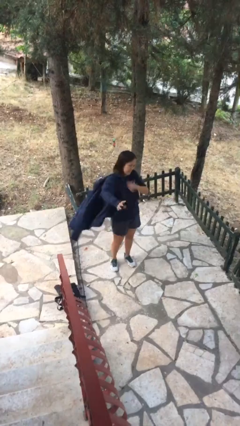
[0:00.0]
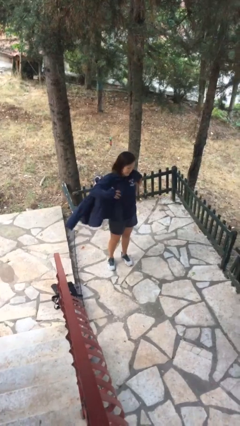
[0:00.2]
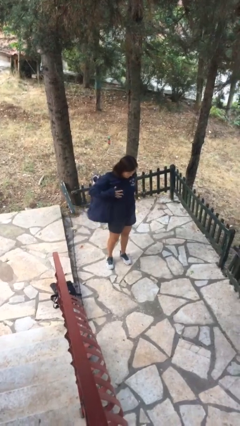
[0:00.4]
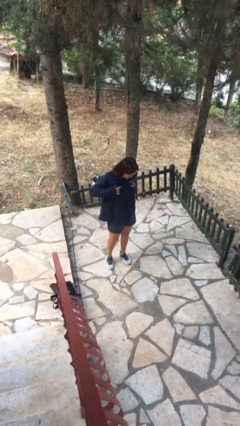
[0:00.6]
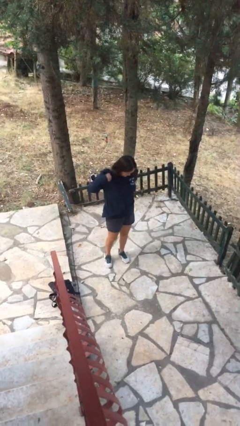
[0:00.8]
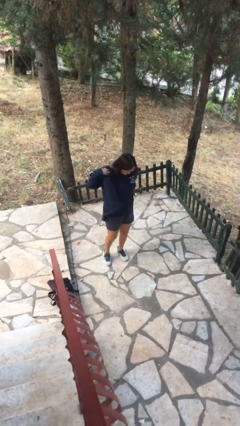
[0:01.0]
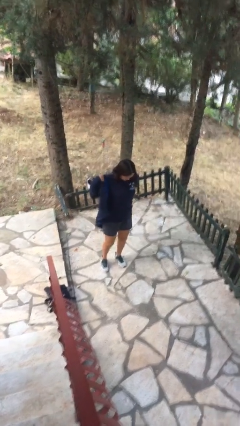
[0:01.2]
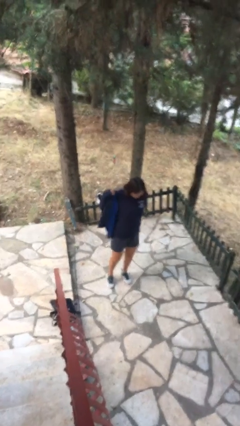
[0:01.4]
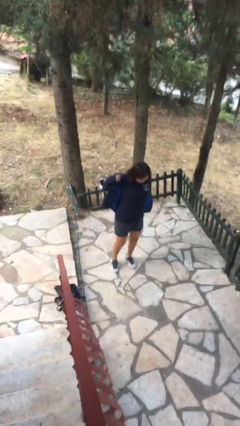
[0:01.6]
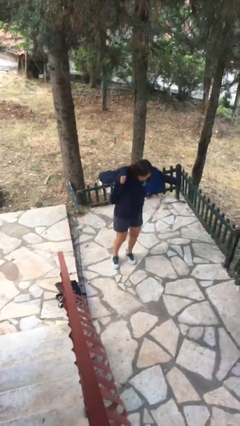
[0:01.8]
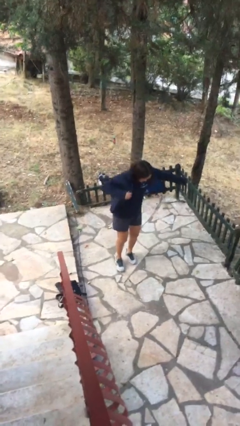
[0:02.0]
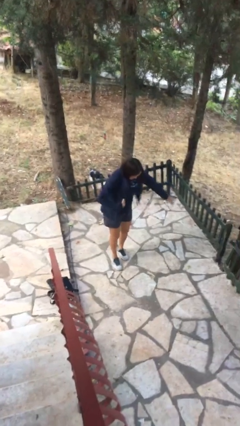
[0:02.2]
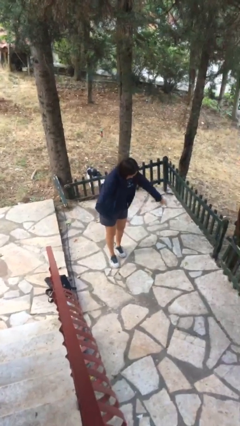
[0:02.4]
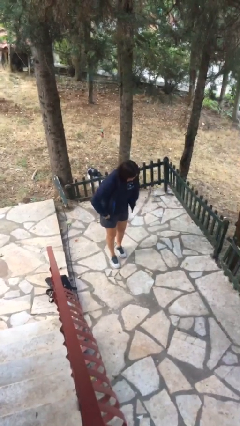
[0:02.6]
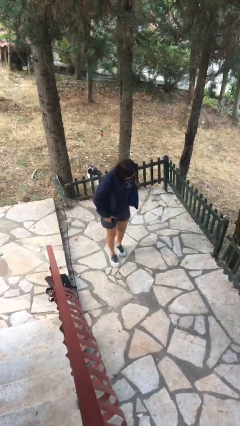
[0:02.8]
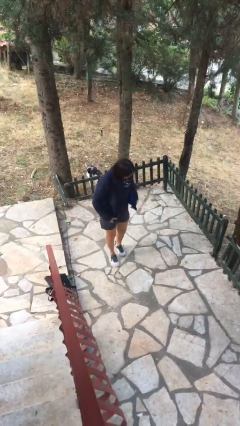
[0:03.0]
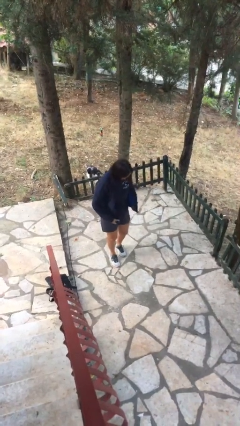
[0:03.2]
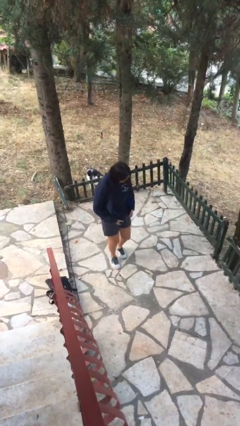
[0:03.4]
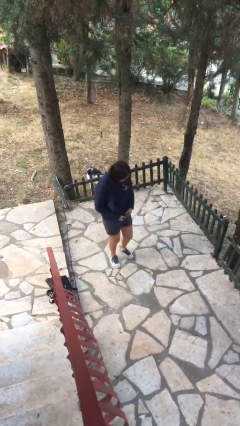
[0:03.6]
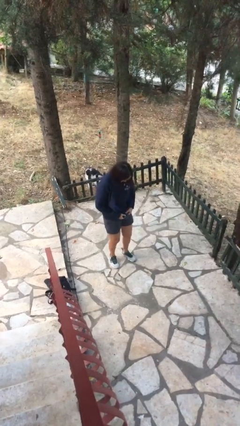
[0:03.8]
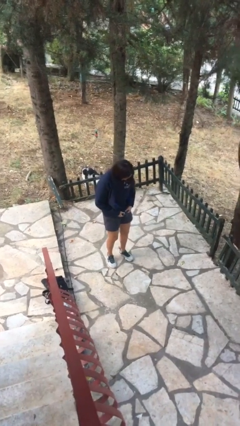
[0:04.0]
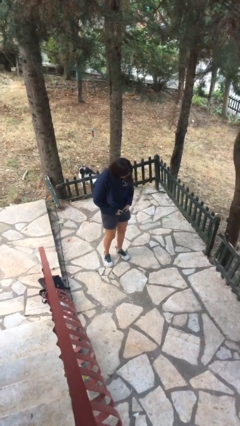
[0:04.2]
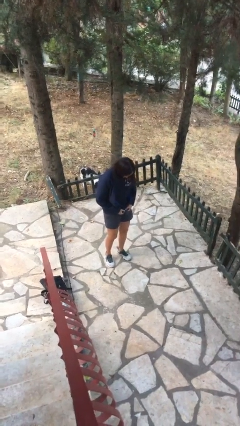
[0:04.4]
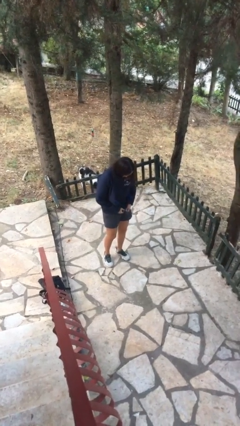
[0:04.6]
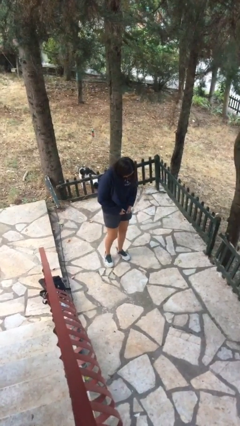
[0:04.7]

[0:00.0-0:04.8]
person puts on jacket

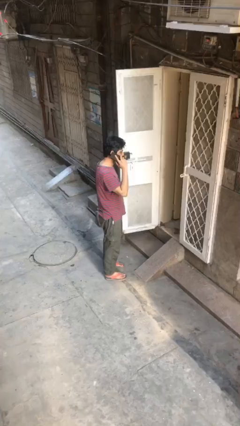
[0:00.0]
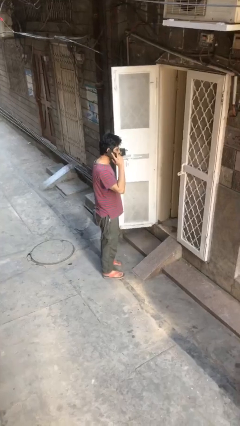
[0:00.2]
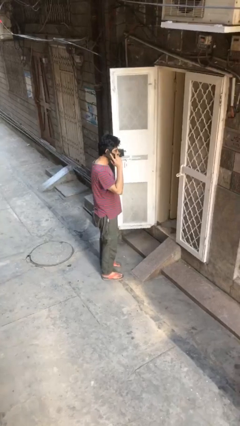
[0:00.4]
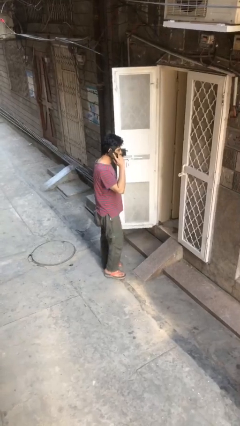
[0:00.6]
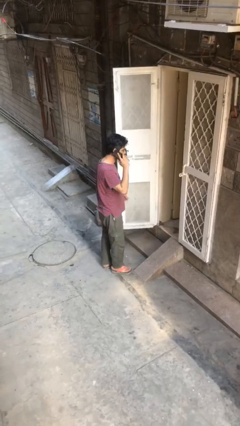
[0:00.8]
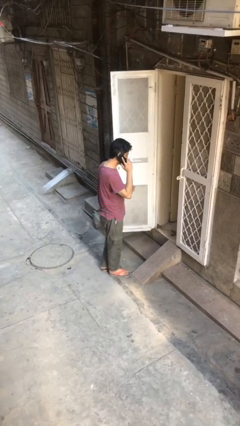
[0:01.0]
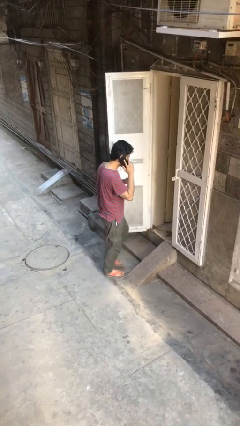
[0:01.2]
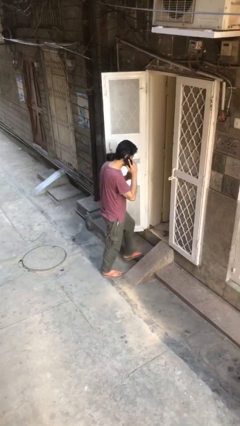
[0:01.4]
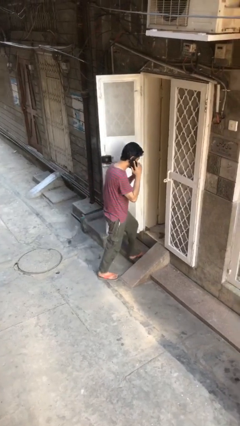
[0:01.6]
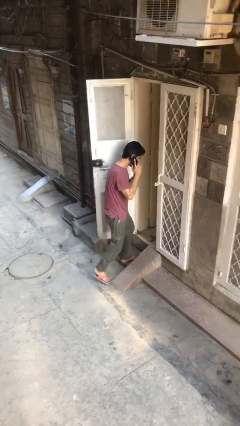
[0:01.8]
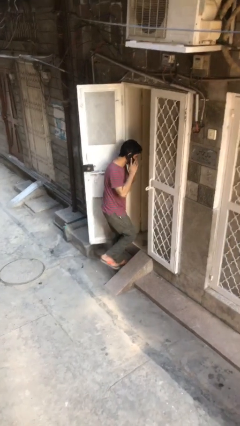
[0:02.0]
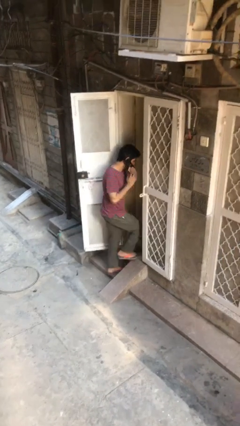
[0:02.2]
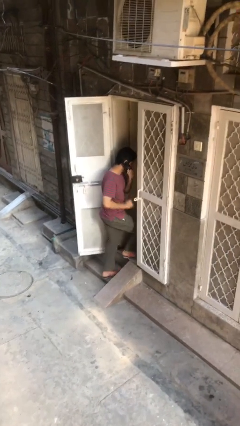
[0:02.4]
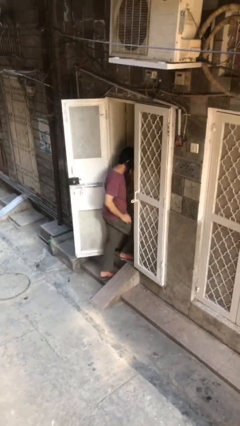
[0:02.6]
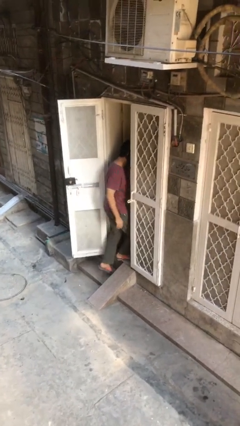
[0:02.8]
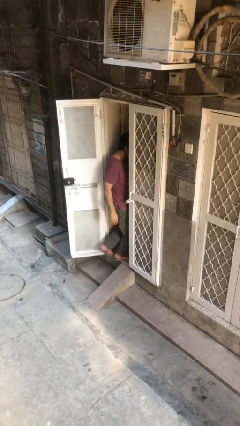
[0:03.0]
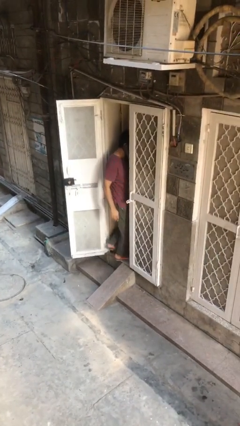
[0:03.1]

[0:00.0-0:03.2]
person exits scene through structure

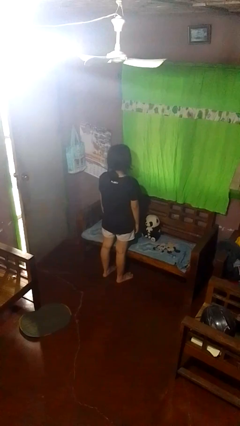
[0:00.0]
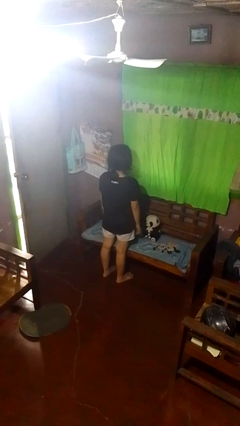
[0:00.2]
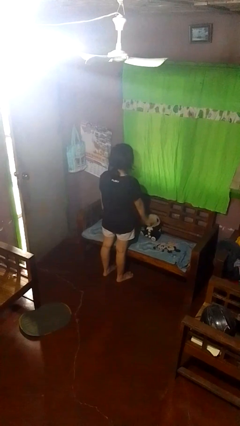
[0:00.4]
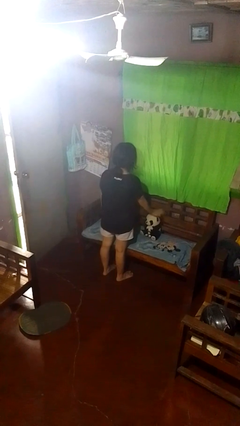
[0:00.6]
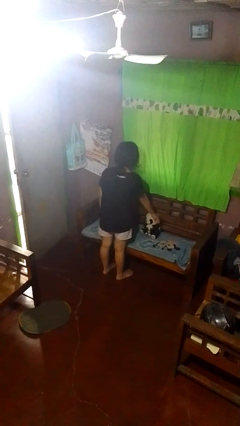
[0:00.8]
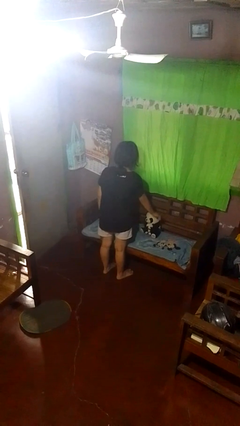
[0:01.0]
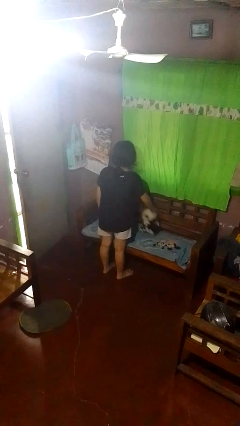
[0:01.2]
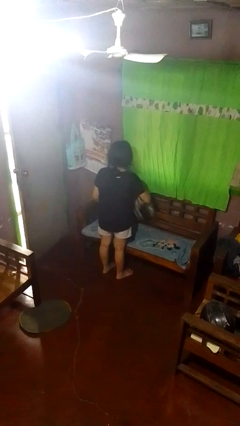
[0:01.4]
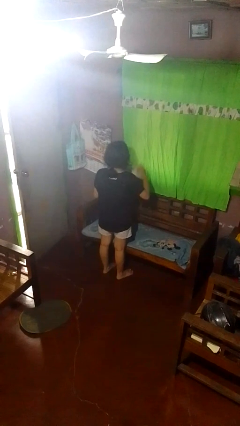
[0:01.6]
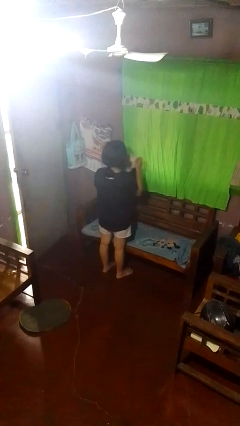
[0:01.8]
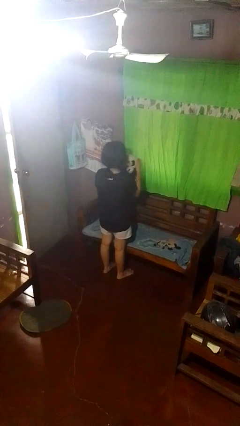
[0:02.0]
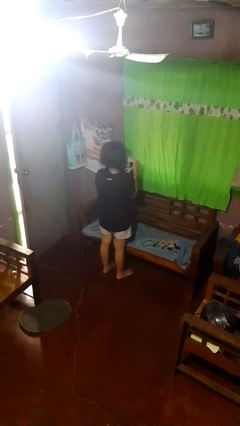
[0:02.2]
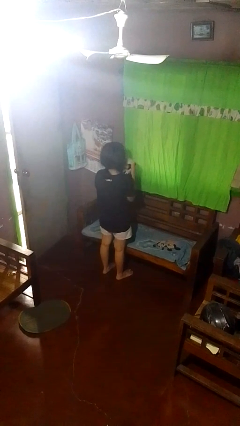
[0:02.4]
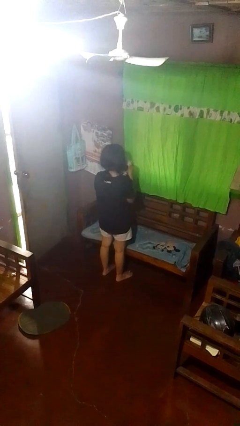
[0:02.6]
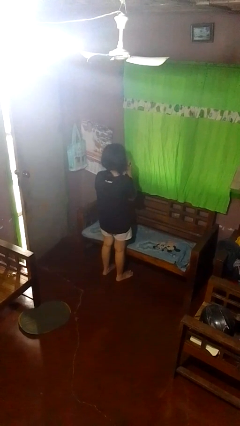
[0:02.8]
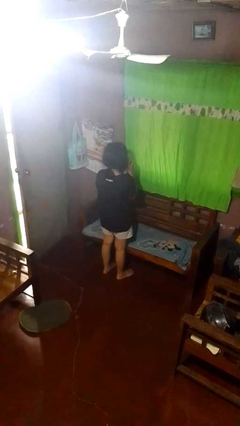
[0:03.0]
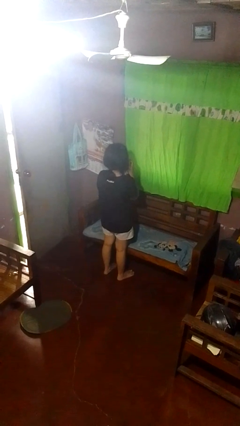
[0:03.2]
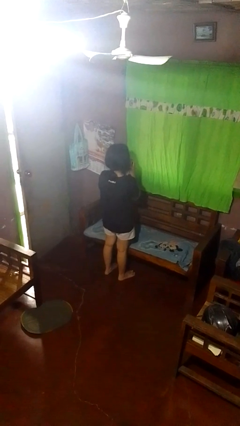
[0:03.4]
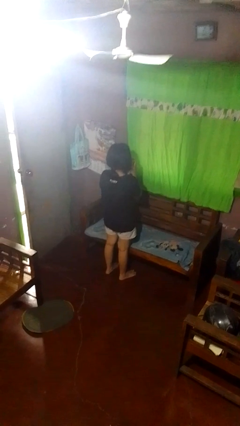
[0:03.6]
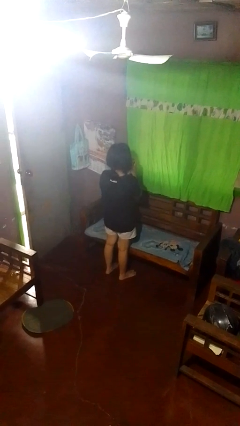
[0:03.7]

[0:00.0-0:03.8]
person picks up object from couch

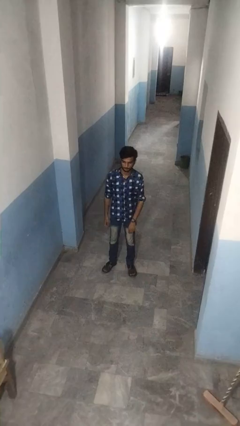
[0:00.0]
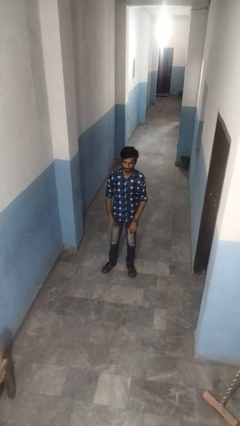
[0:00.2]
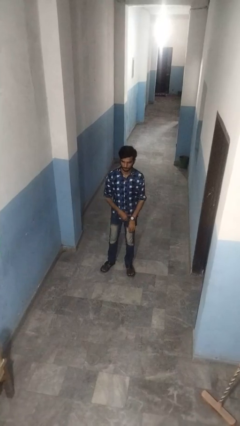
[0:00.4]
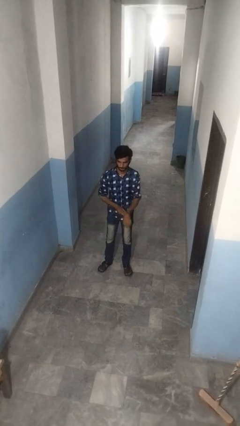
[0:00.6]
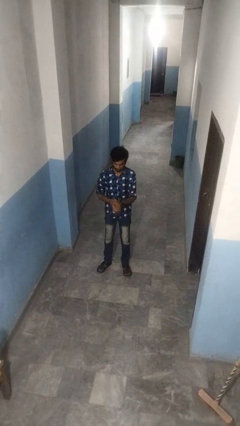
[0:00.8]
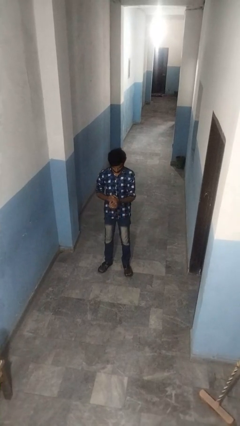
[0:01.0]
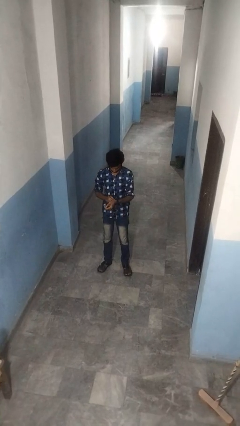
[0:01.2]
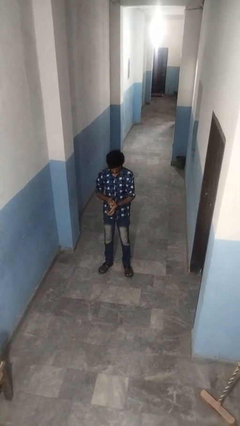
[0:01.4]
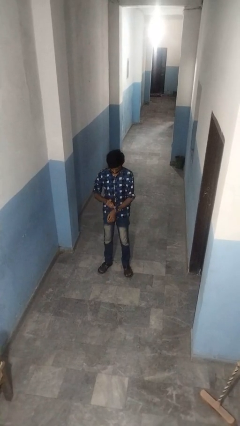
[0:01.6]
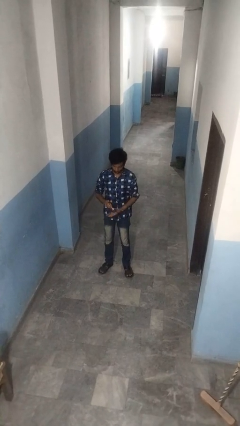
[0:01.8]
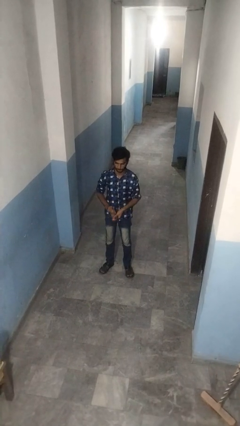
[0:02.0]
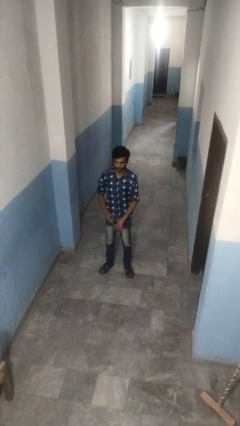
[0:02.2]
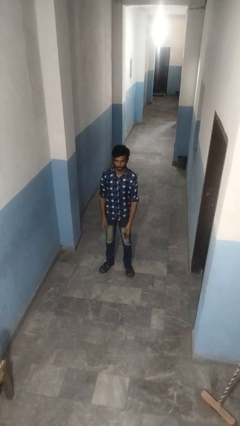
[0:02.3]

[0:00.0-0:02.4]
person takes off wristwatch

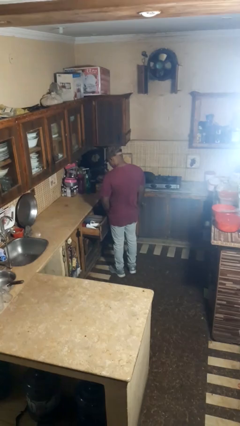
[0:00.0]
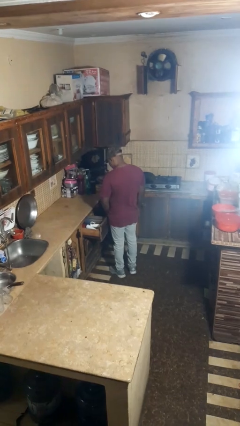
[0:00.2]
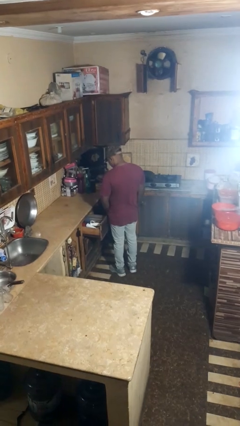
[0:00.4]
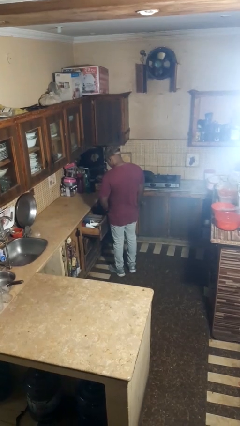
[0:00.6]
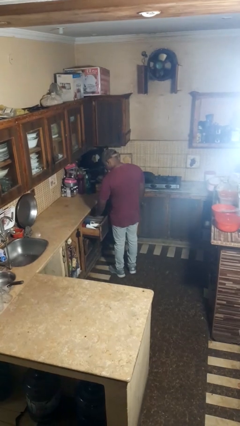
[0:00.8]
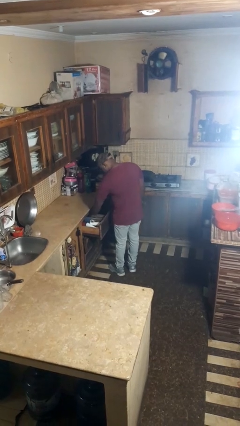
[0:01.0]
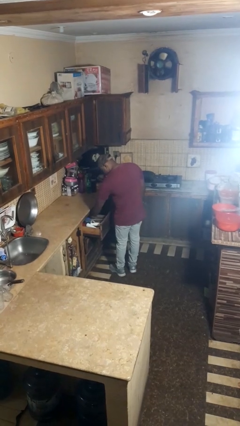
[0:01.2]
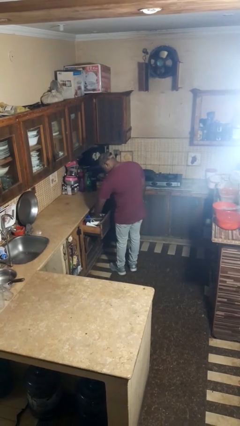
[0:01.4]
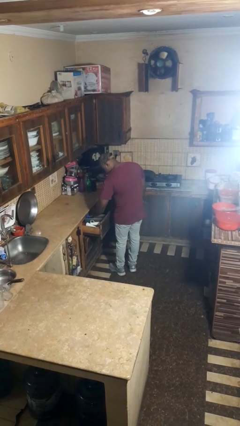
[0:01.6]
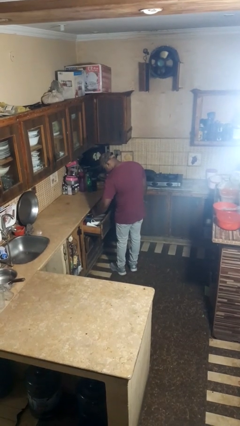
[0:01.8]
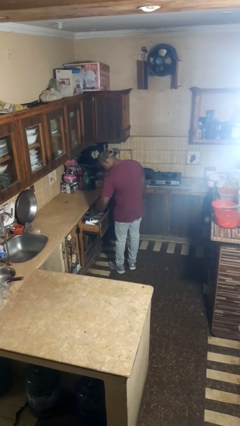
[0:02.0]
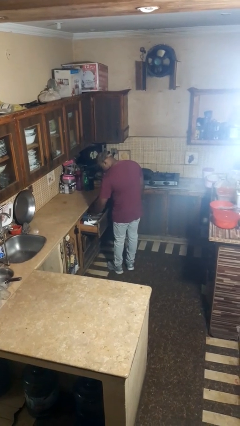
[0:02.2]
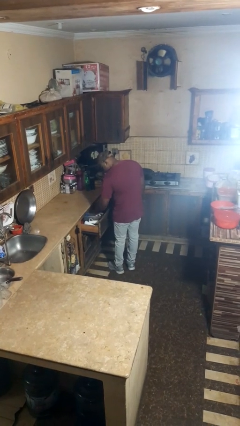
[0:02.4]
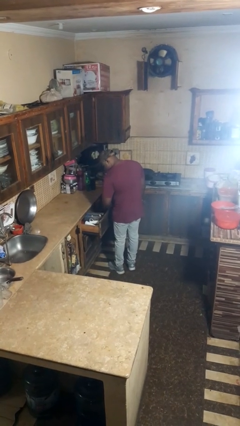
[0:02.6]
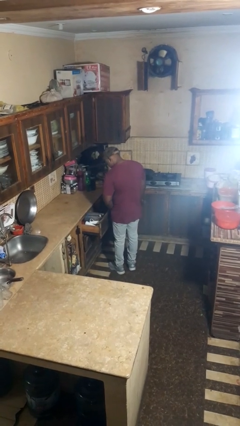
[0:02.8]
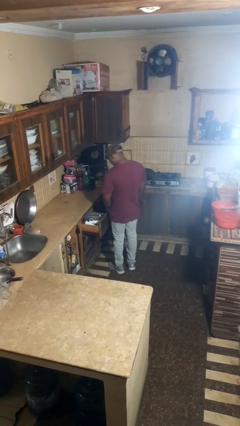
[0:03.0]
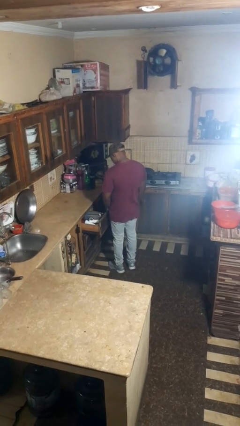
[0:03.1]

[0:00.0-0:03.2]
person searches in kitchen drawer

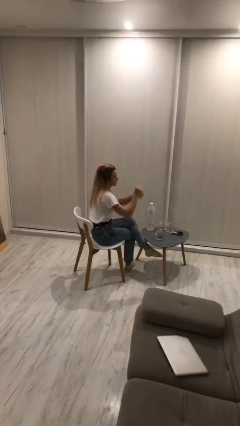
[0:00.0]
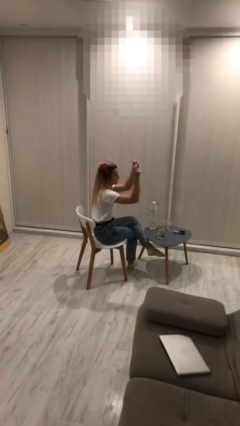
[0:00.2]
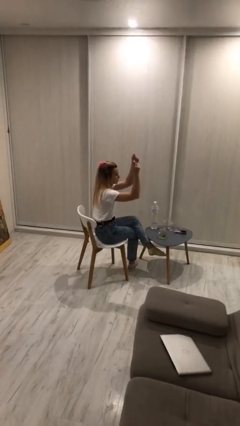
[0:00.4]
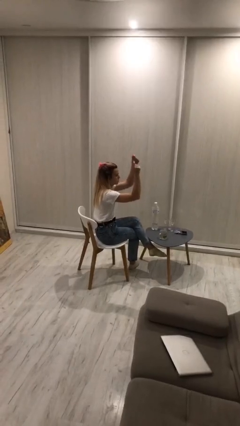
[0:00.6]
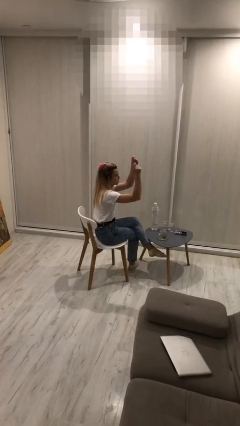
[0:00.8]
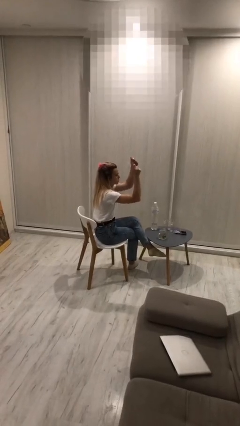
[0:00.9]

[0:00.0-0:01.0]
person snaps fingers
